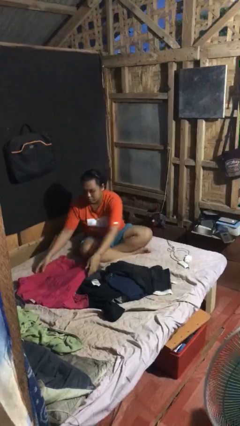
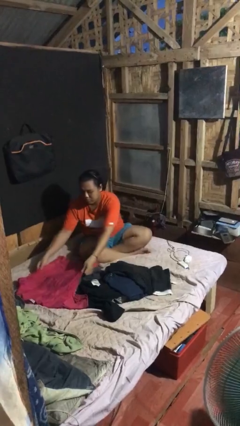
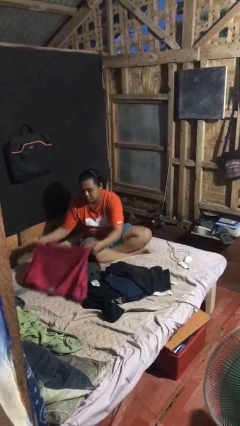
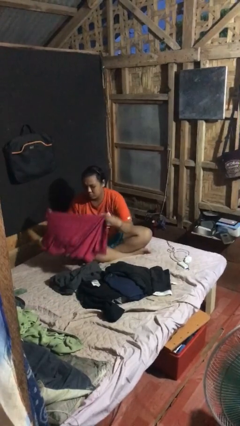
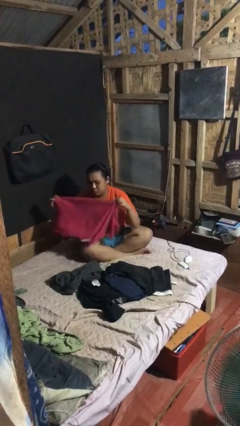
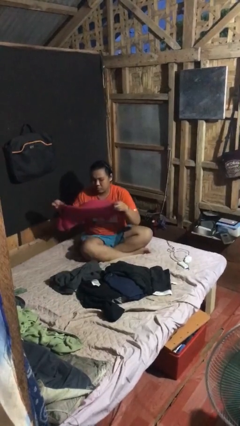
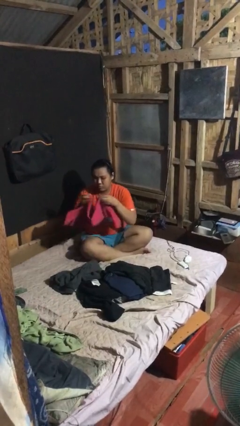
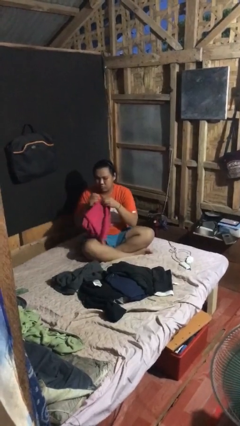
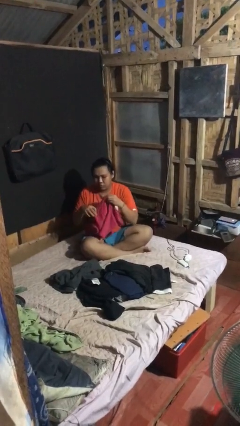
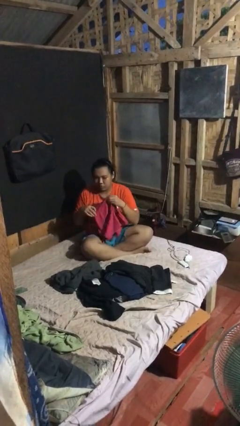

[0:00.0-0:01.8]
person folds shirt

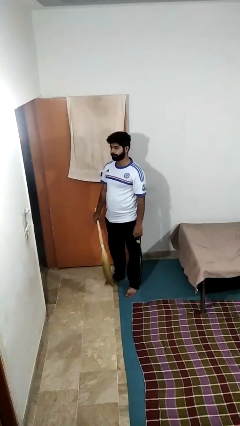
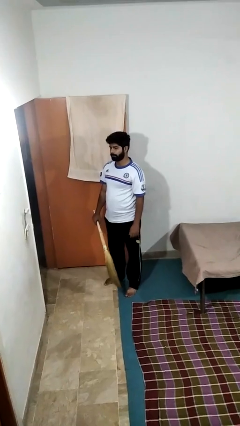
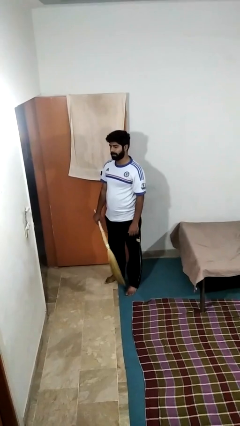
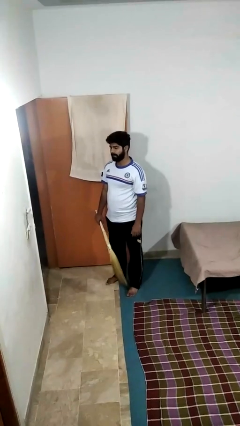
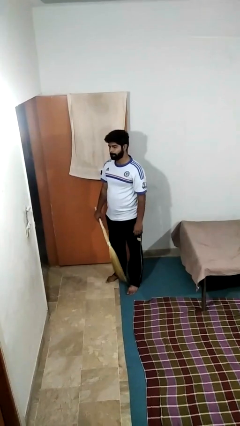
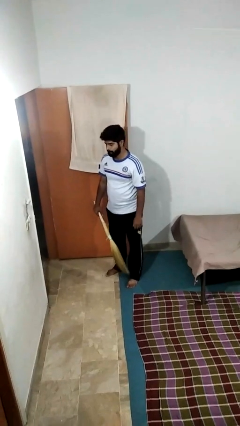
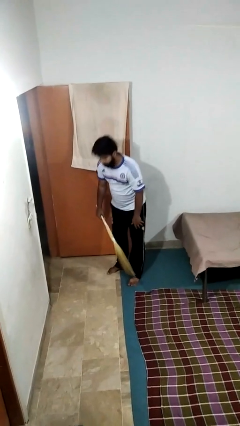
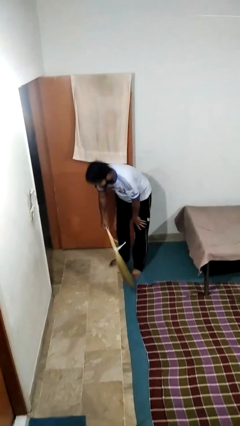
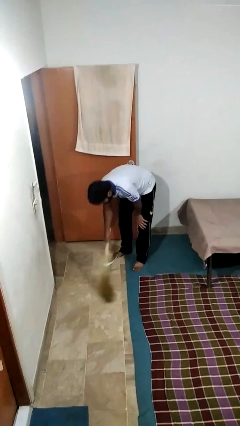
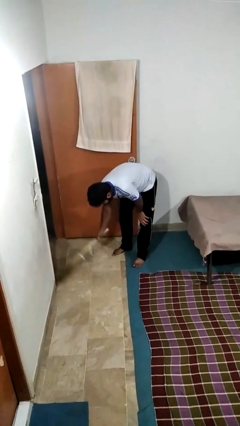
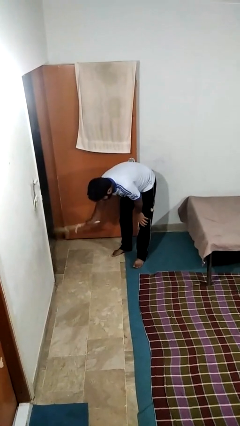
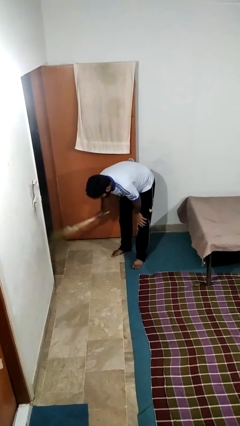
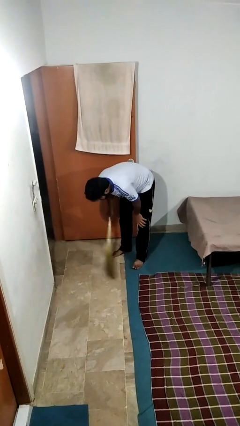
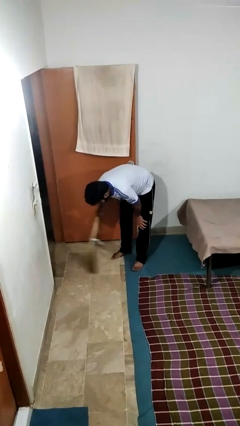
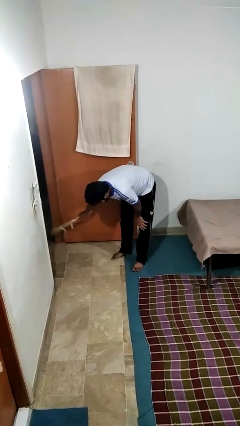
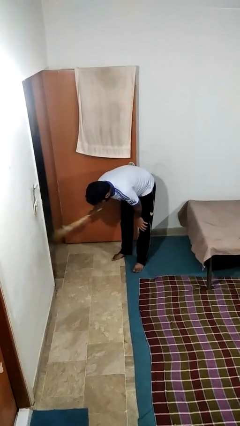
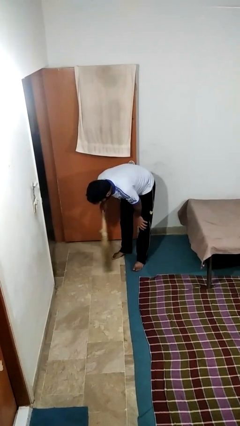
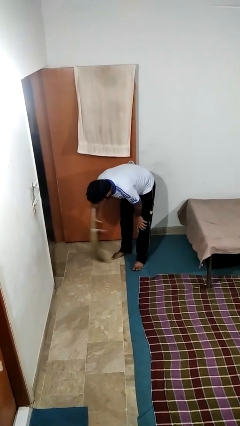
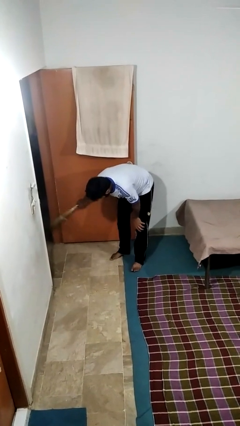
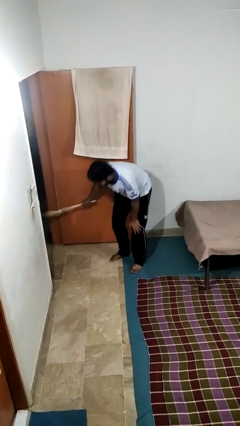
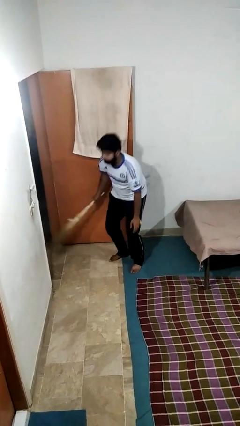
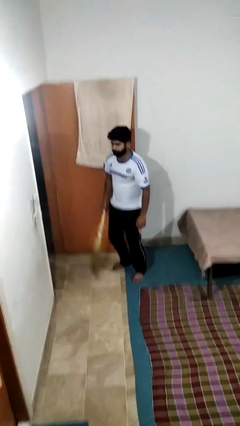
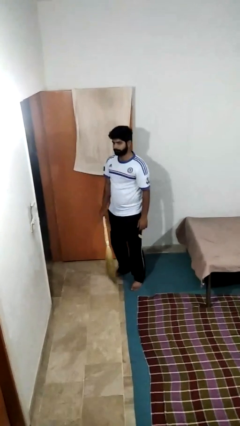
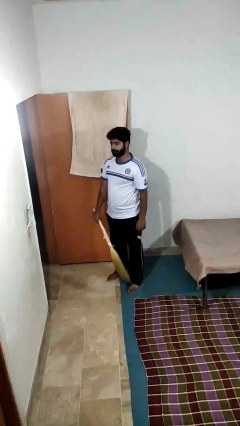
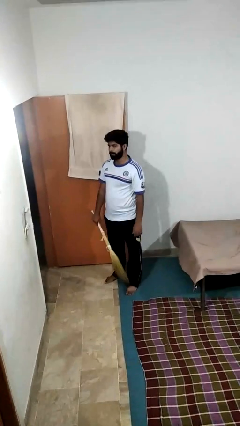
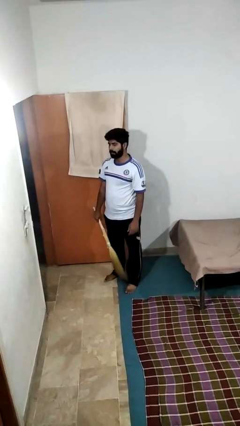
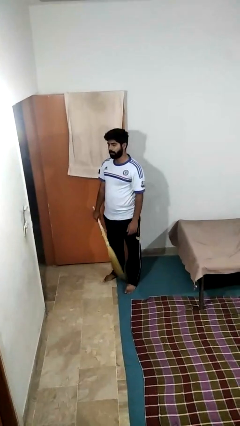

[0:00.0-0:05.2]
person sweeps floor

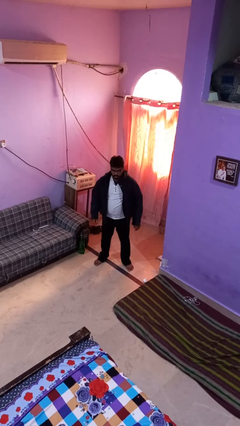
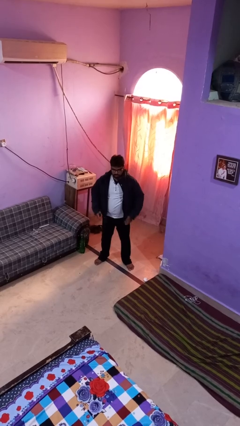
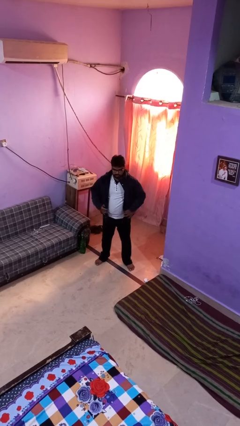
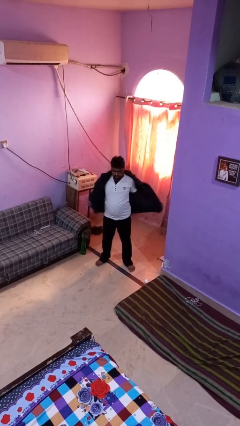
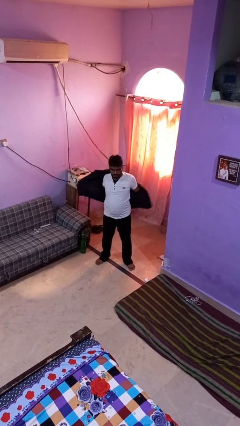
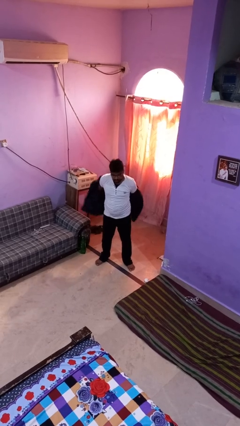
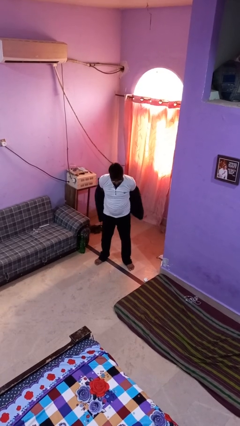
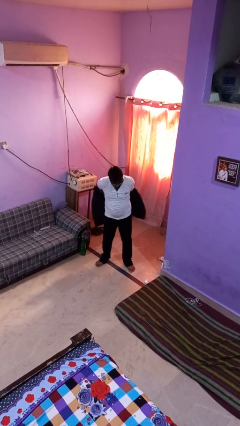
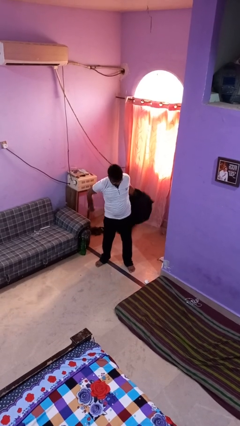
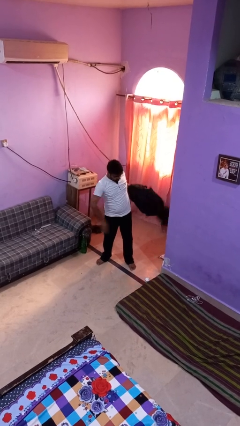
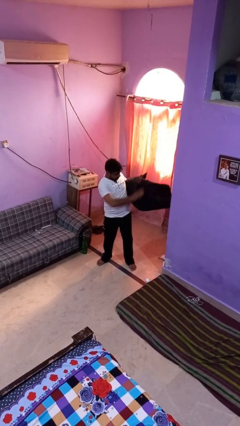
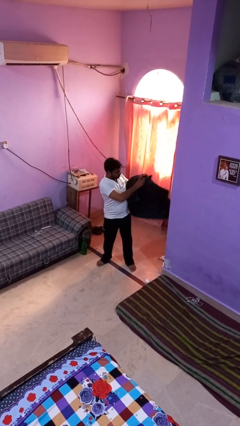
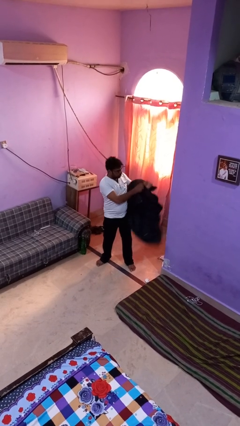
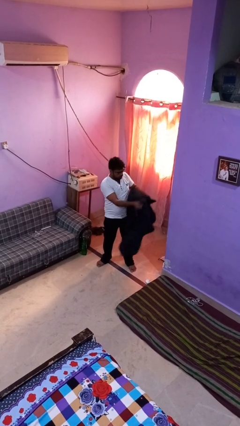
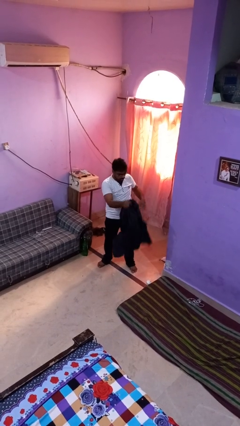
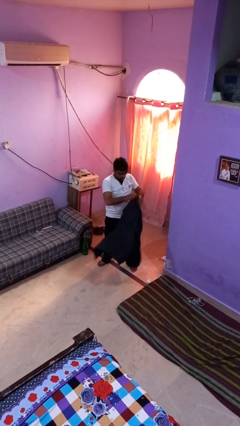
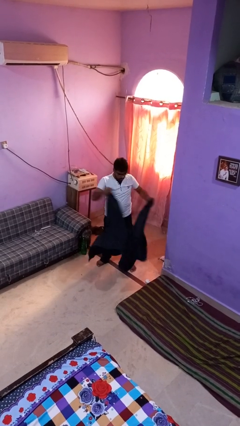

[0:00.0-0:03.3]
person takes off jacket

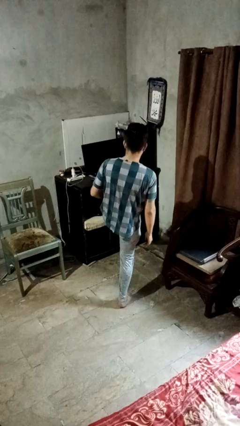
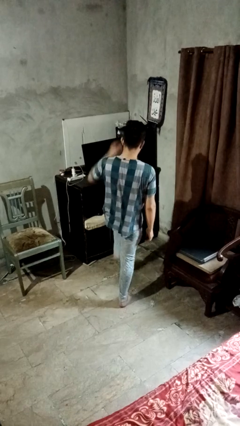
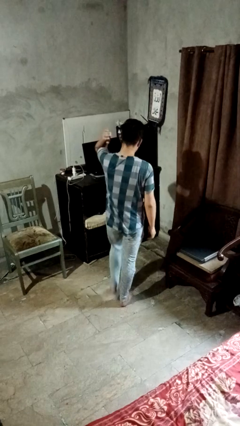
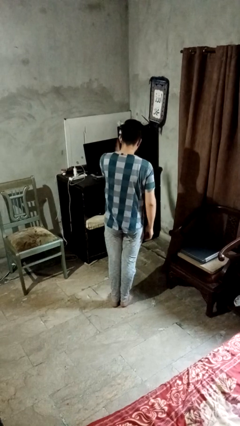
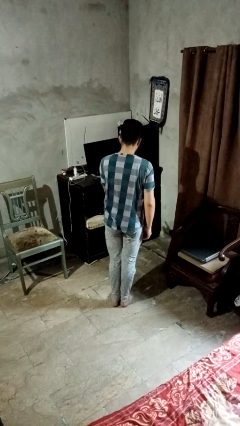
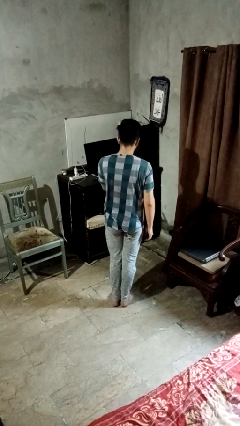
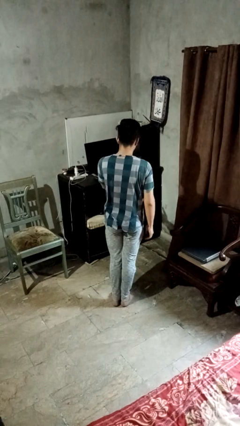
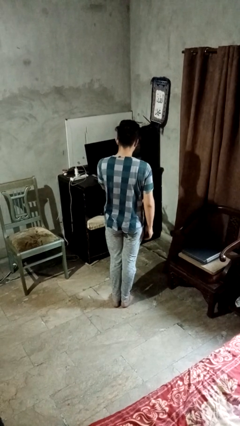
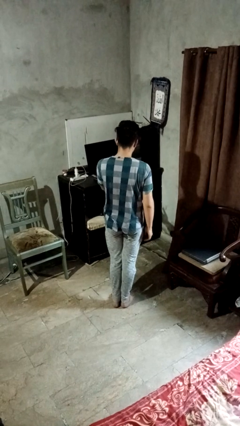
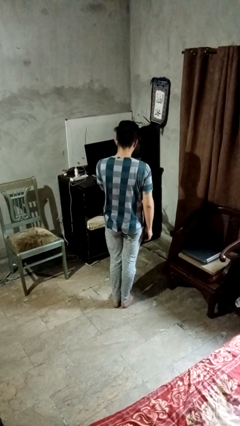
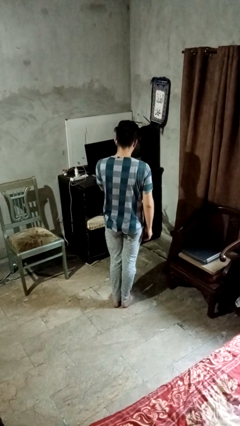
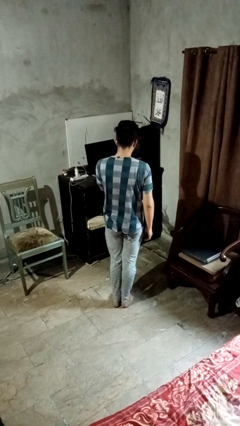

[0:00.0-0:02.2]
person karate chop

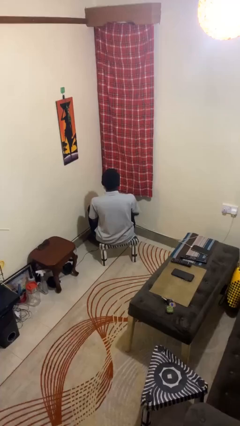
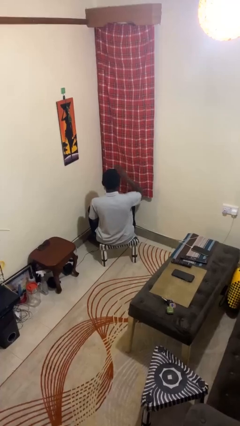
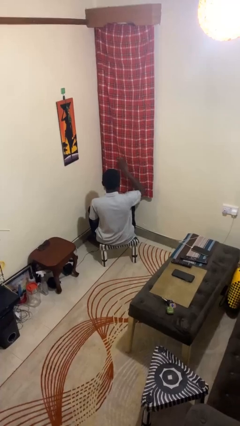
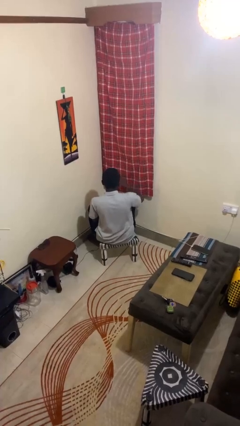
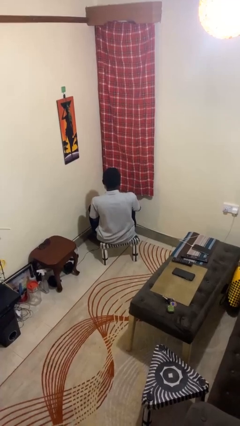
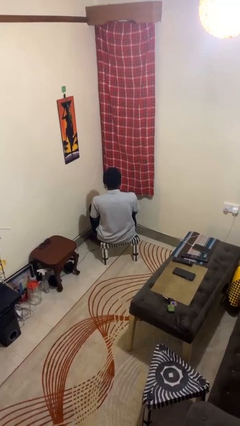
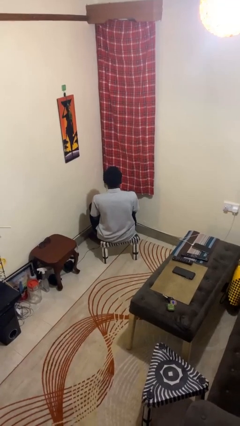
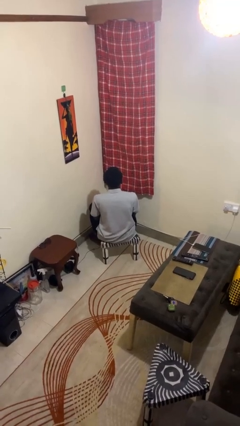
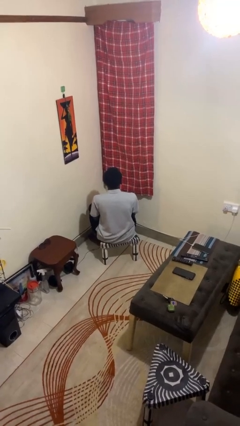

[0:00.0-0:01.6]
person gestures swipe down

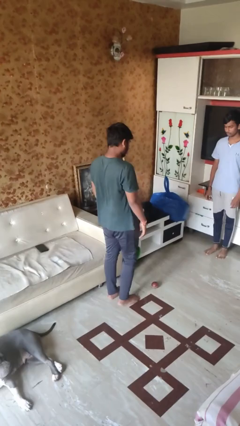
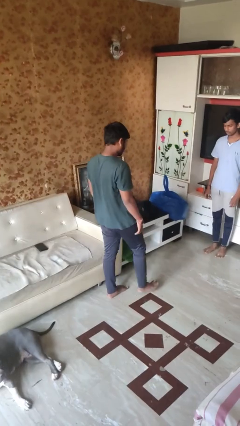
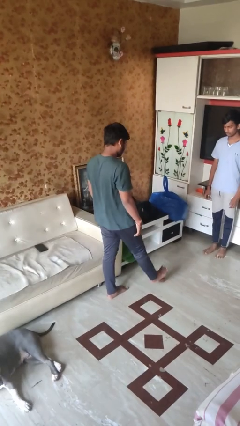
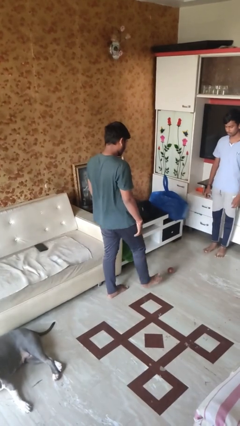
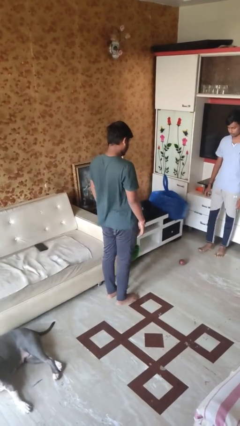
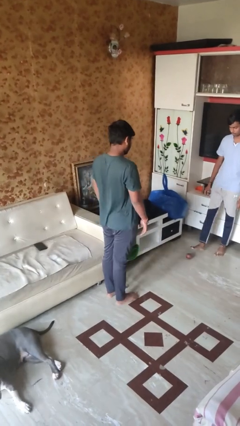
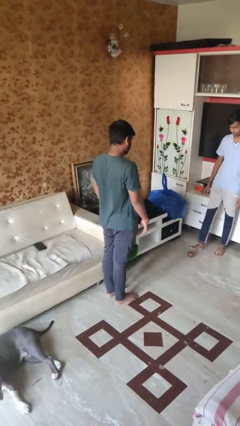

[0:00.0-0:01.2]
person kicks object to person

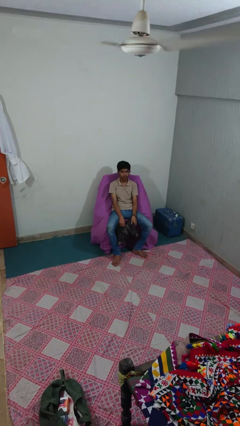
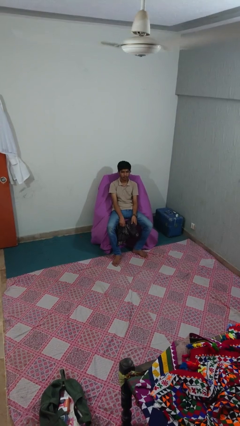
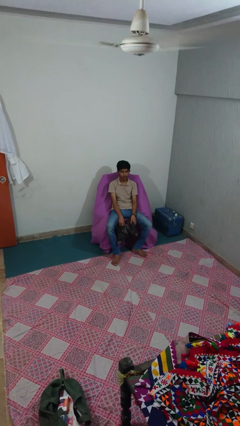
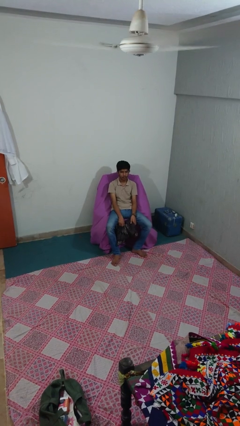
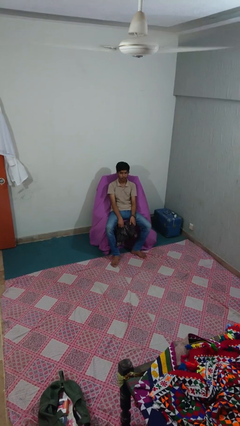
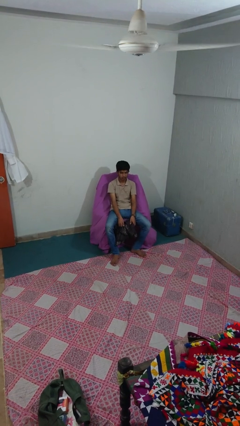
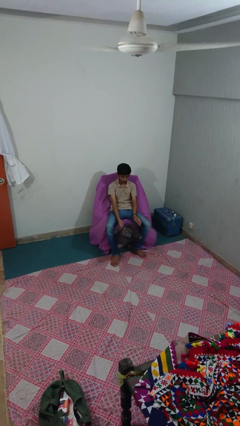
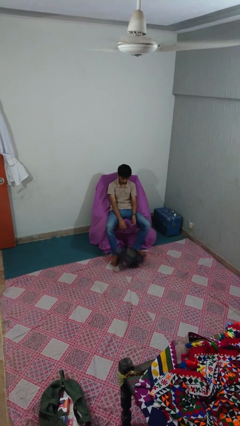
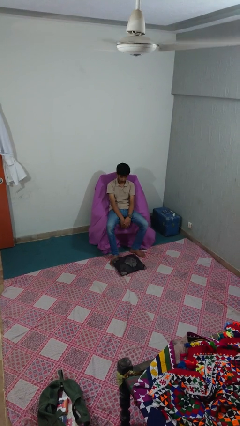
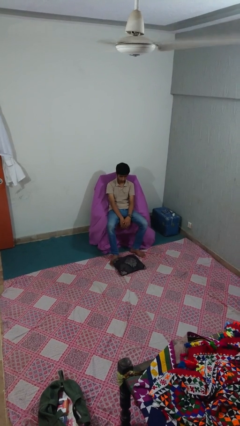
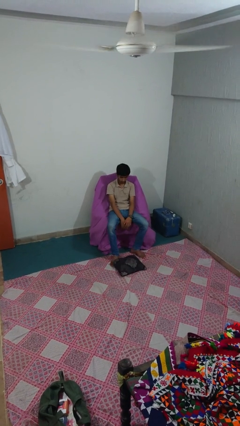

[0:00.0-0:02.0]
person drops object
